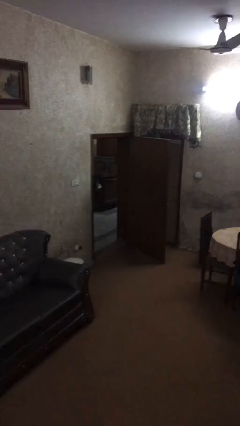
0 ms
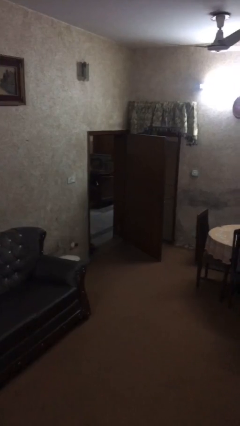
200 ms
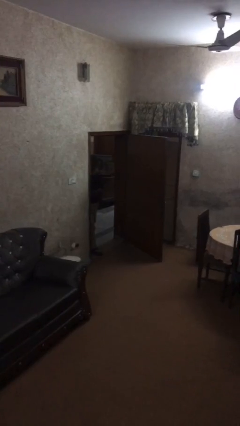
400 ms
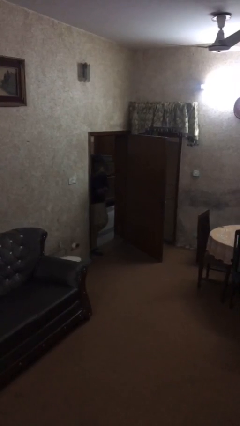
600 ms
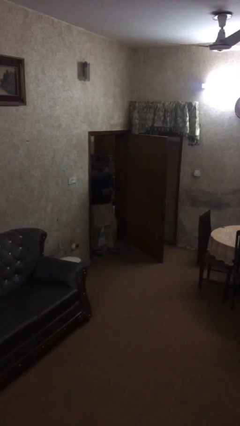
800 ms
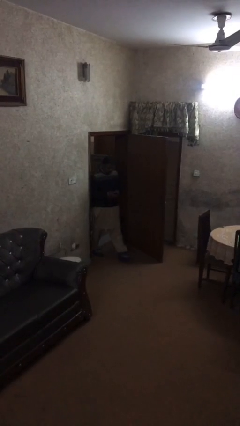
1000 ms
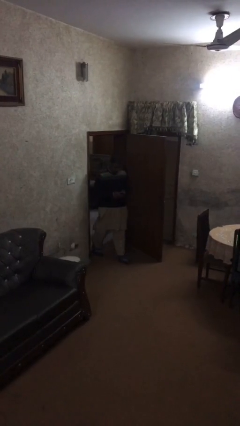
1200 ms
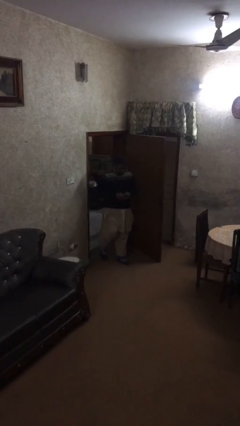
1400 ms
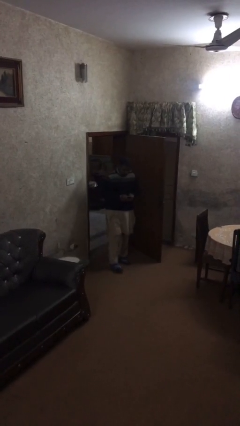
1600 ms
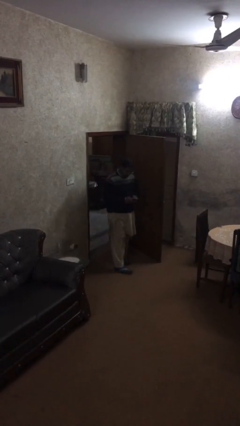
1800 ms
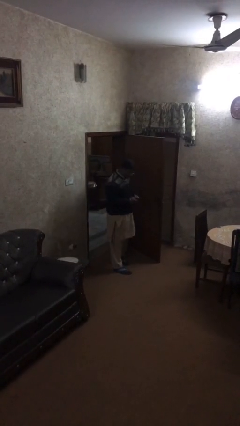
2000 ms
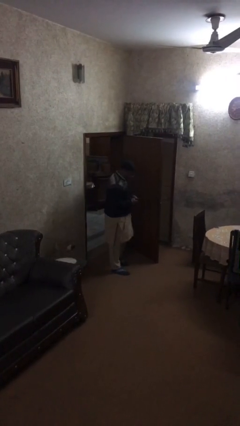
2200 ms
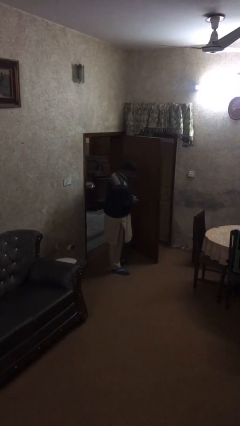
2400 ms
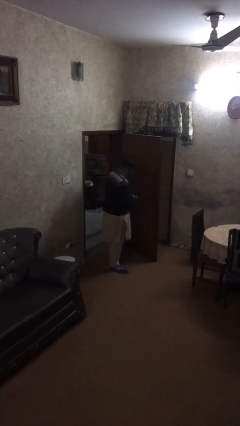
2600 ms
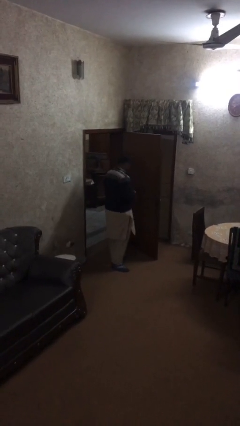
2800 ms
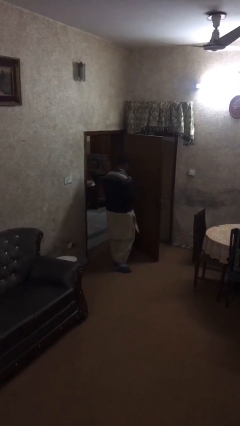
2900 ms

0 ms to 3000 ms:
person enters scene through structure

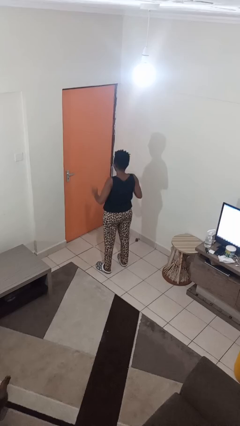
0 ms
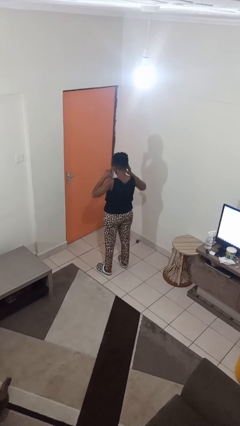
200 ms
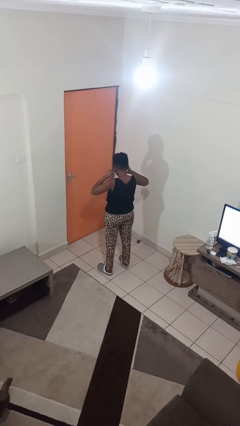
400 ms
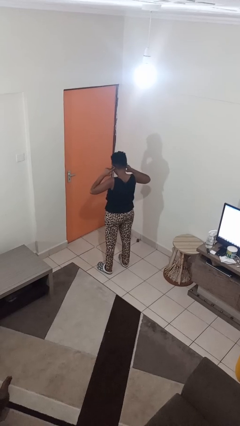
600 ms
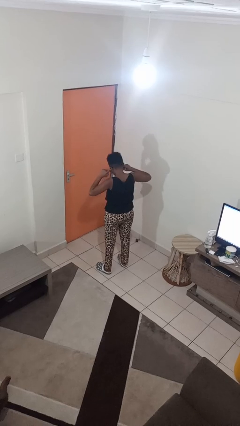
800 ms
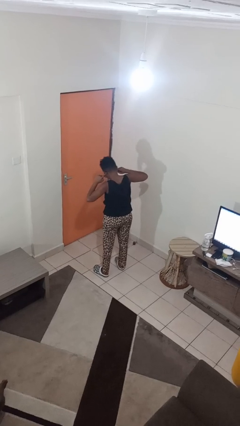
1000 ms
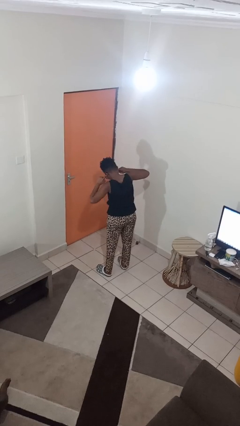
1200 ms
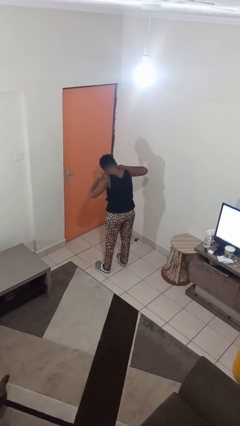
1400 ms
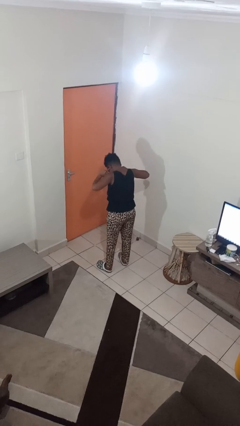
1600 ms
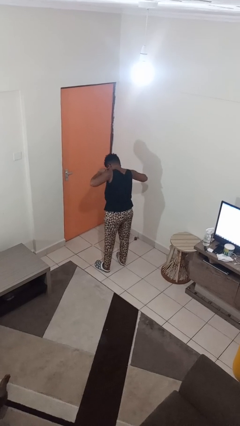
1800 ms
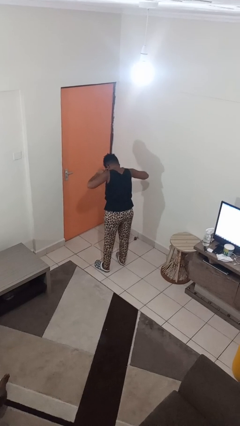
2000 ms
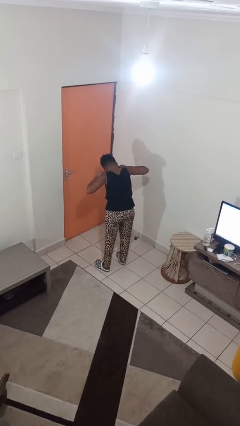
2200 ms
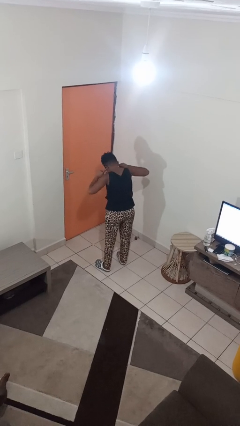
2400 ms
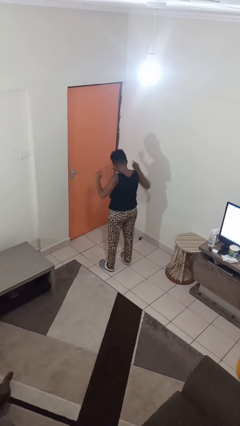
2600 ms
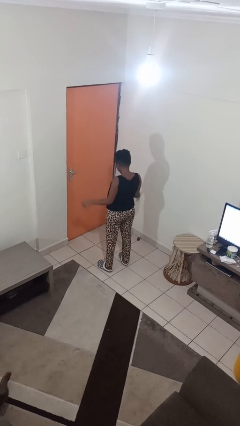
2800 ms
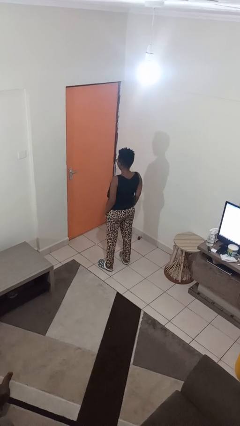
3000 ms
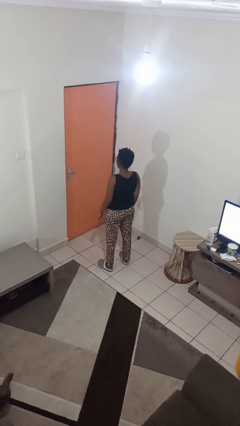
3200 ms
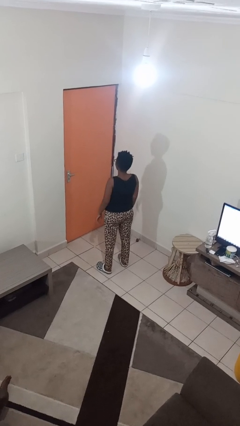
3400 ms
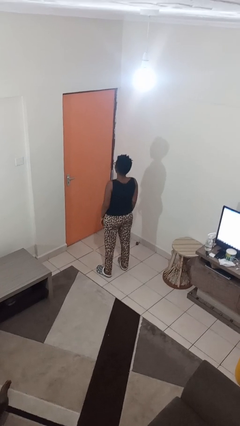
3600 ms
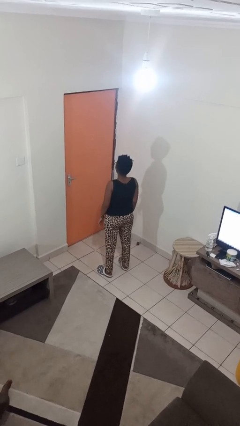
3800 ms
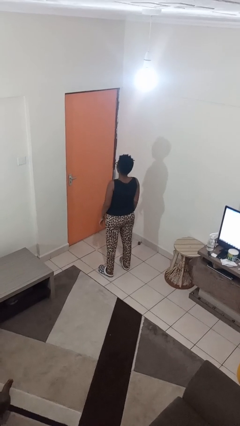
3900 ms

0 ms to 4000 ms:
person puts fingers in ear

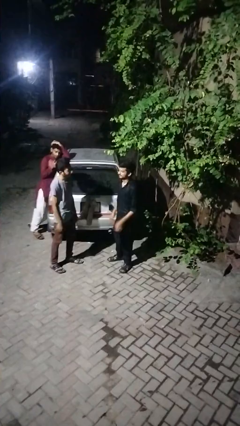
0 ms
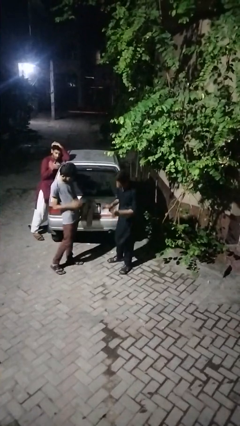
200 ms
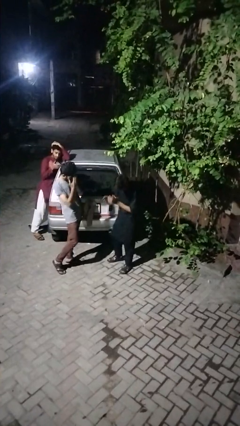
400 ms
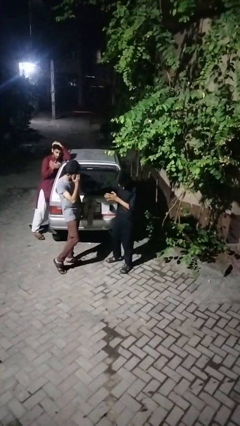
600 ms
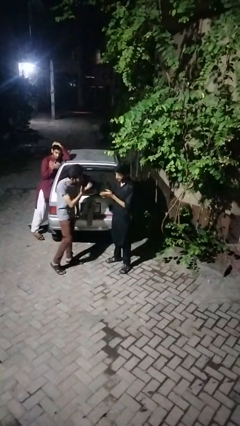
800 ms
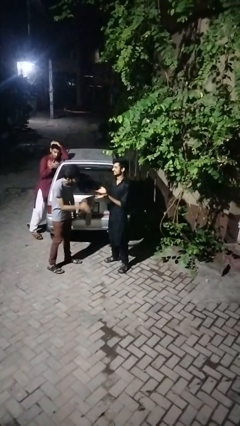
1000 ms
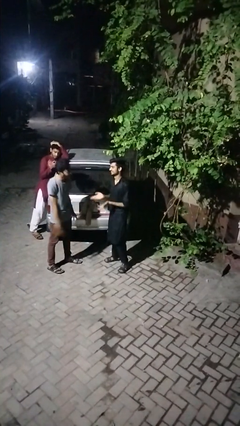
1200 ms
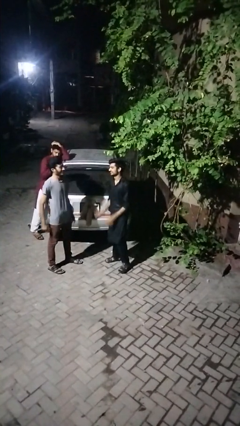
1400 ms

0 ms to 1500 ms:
person laughs with person

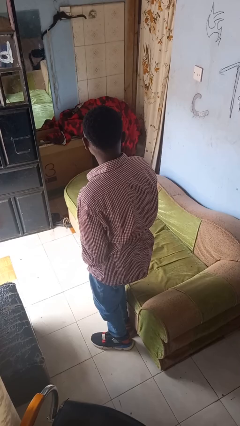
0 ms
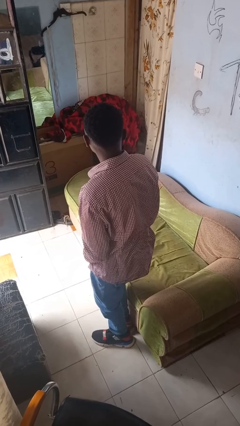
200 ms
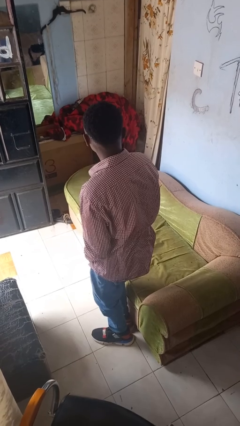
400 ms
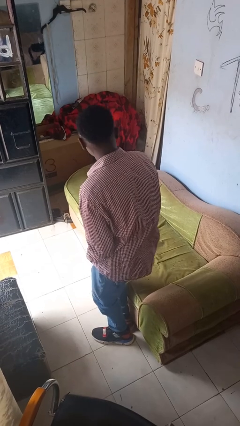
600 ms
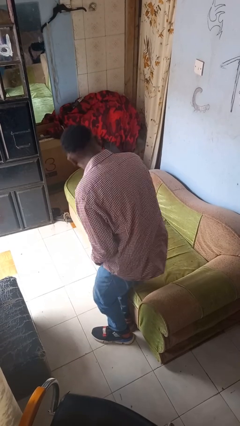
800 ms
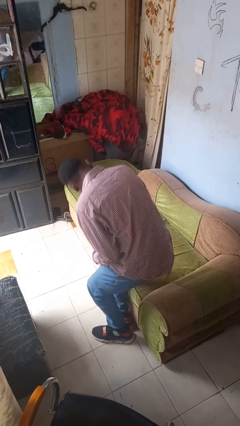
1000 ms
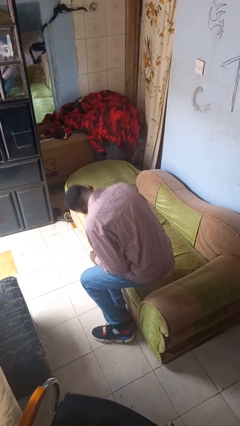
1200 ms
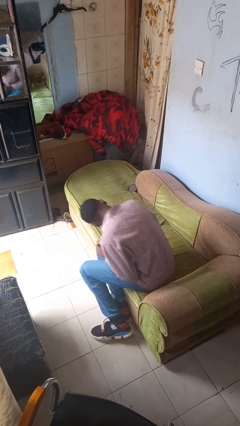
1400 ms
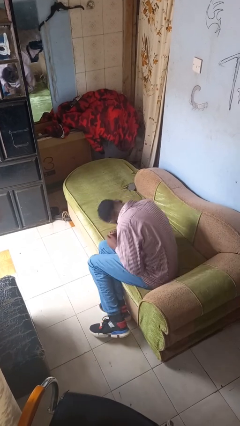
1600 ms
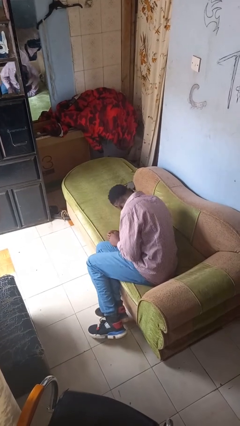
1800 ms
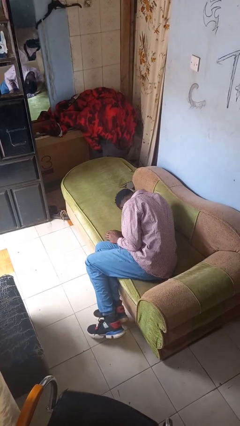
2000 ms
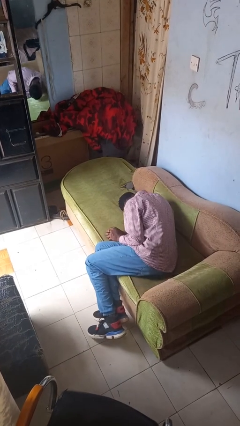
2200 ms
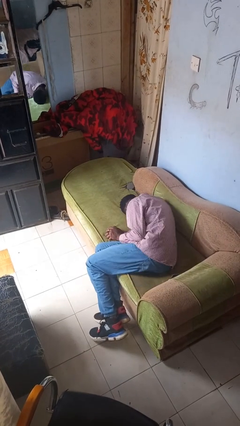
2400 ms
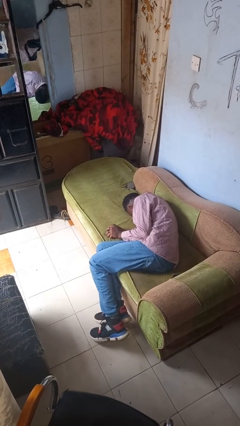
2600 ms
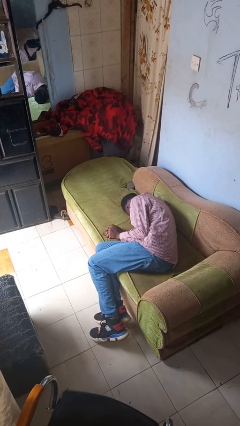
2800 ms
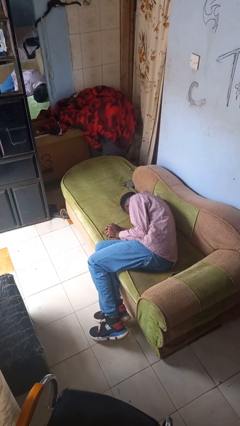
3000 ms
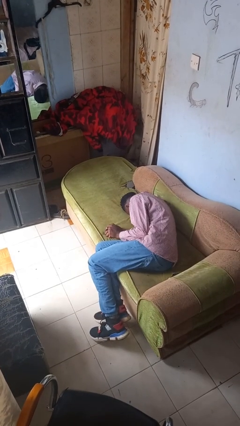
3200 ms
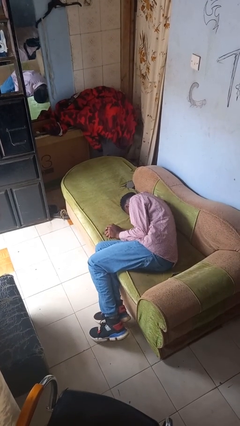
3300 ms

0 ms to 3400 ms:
person lies down on couch

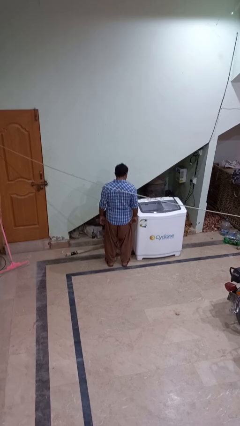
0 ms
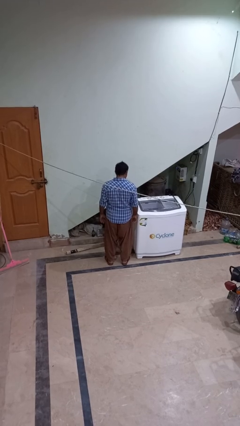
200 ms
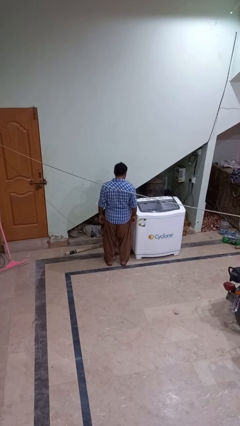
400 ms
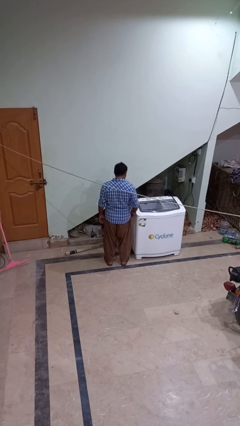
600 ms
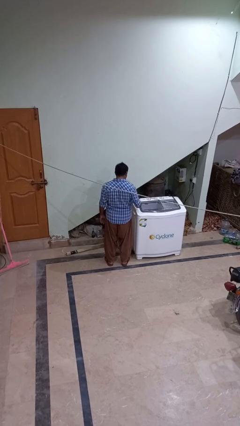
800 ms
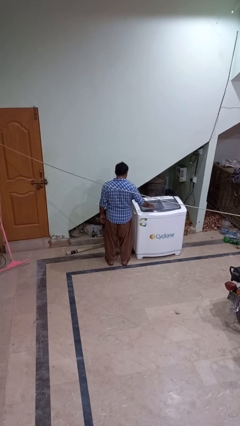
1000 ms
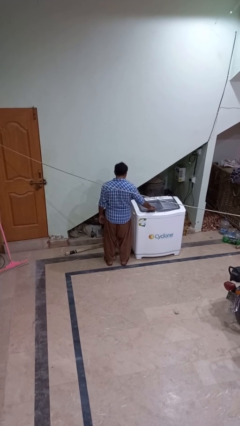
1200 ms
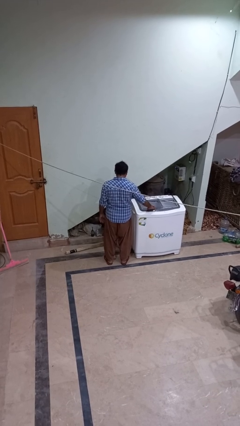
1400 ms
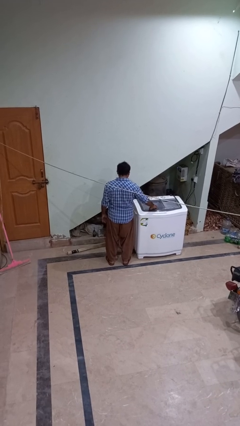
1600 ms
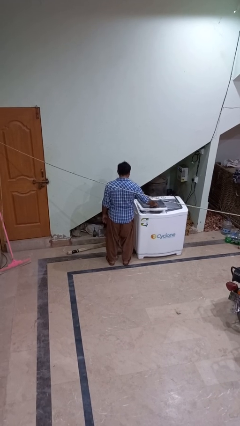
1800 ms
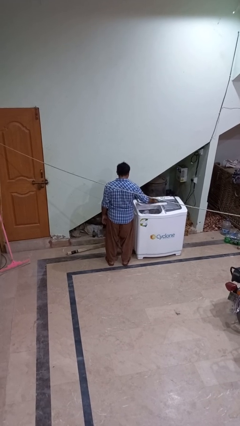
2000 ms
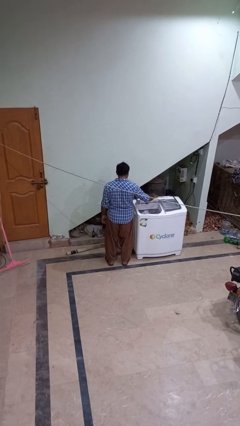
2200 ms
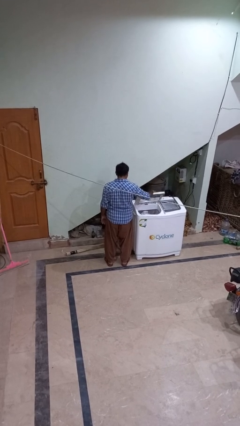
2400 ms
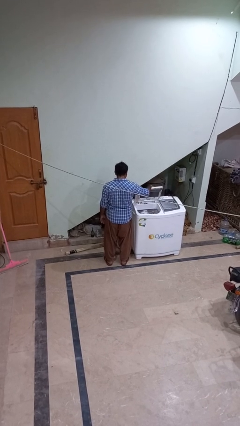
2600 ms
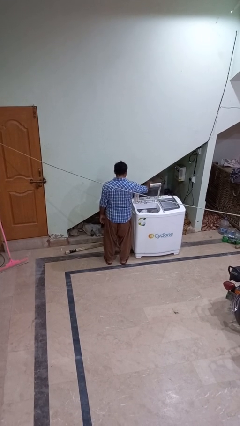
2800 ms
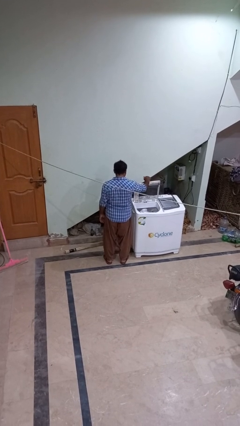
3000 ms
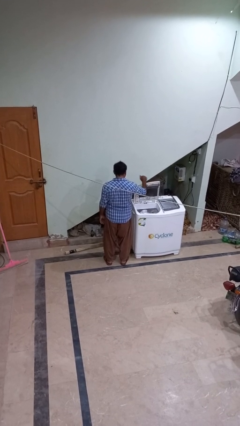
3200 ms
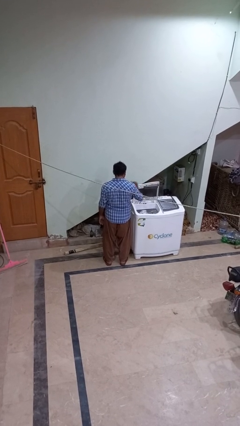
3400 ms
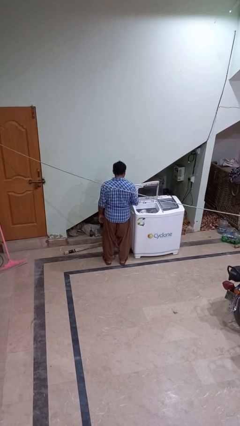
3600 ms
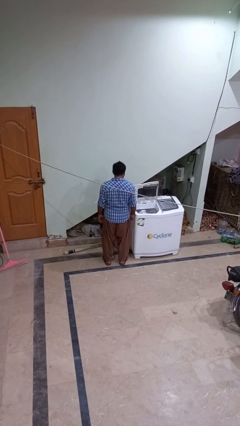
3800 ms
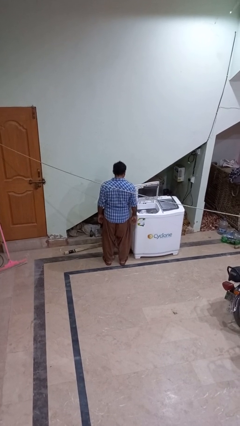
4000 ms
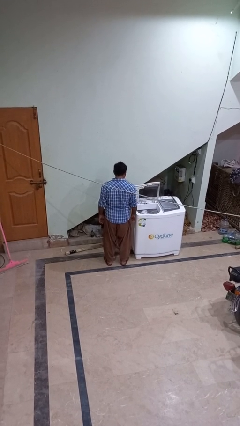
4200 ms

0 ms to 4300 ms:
person opens clothes washer

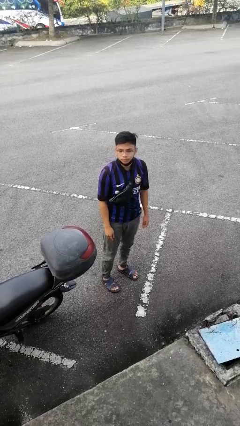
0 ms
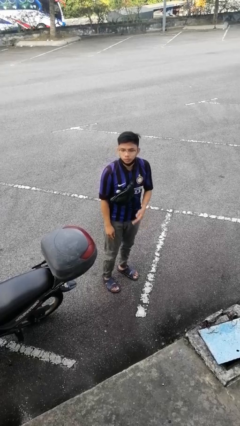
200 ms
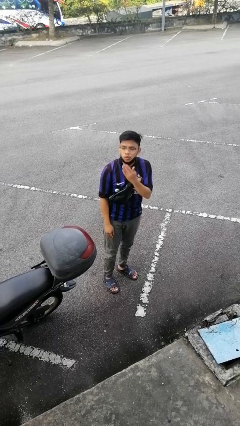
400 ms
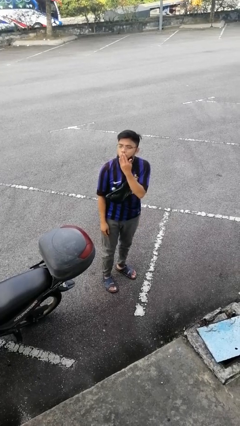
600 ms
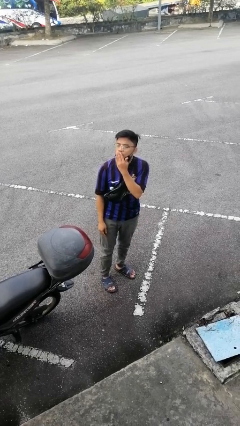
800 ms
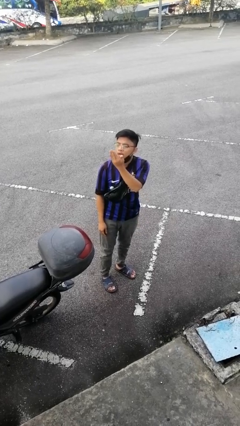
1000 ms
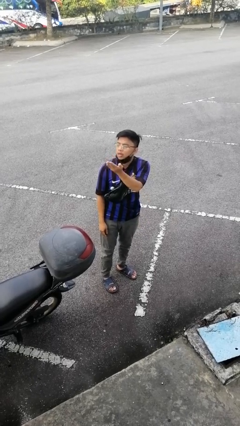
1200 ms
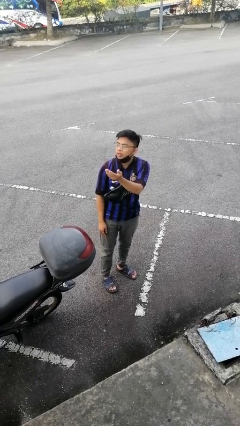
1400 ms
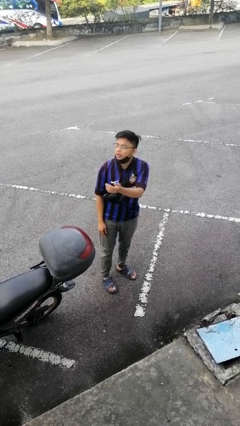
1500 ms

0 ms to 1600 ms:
person gestures blow kiss
